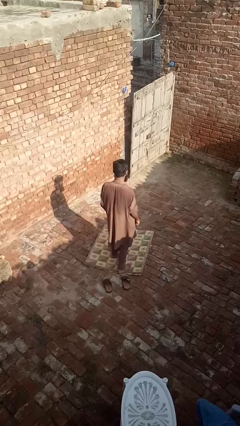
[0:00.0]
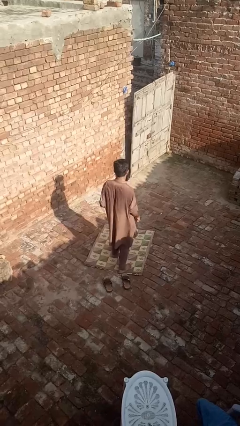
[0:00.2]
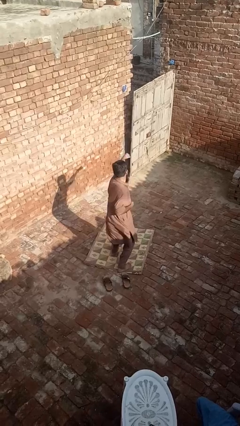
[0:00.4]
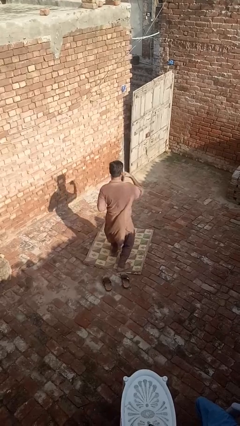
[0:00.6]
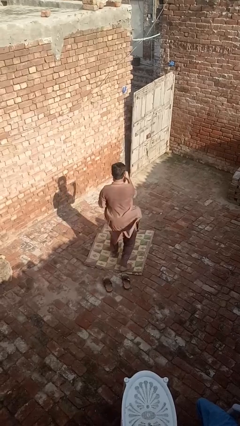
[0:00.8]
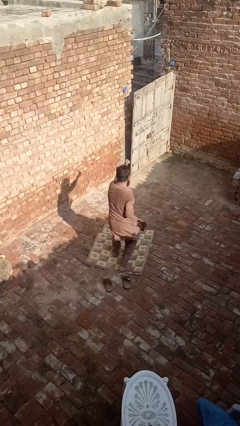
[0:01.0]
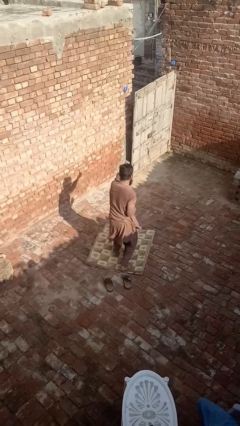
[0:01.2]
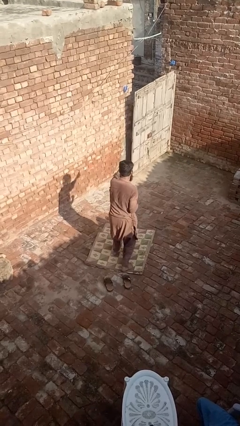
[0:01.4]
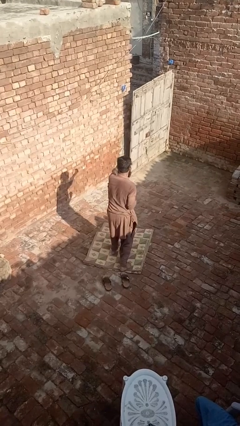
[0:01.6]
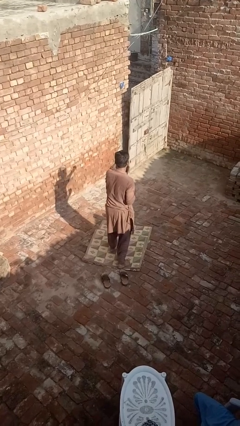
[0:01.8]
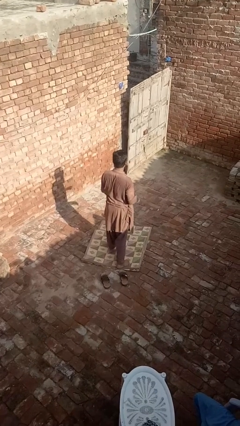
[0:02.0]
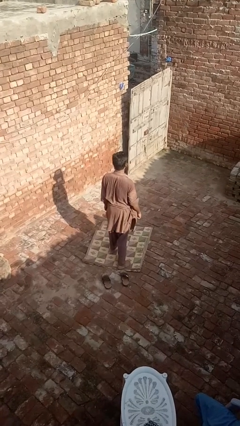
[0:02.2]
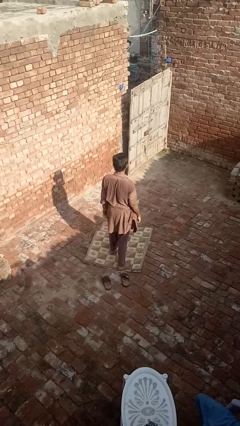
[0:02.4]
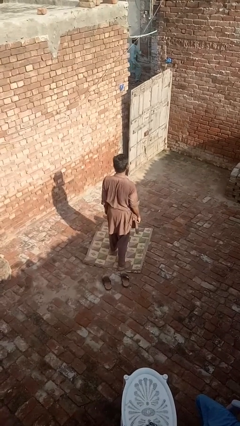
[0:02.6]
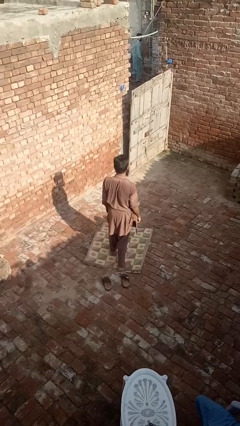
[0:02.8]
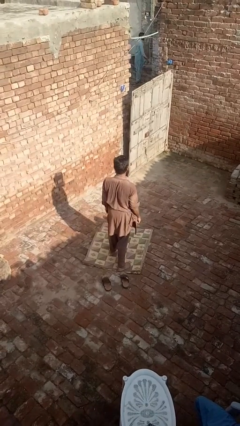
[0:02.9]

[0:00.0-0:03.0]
person punches

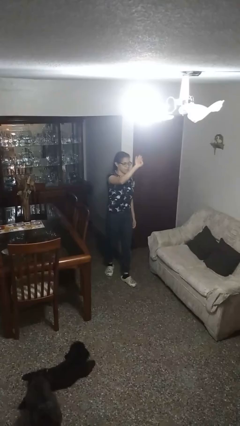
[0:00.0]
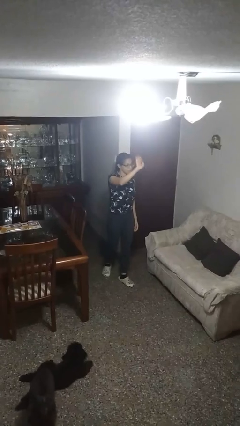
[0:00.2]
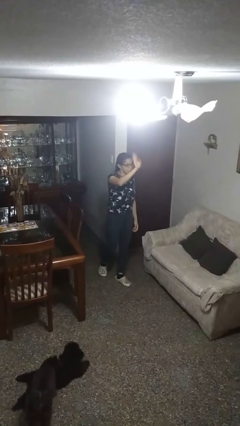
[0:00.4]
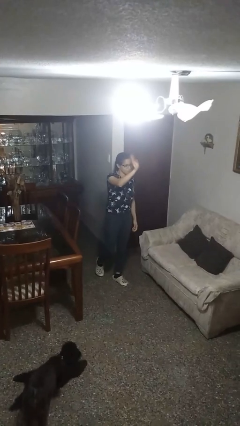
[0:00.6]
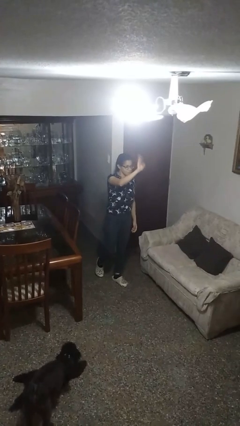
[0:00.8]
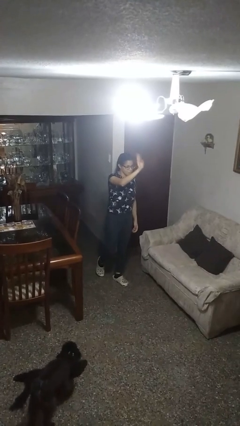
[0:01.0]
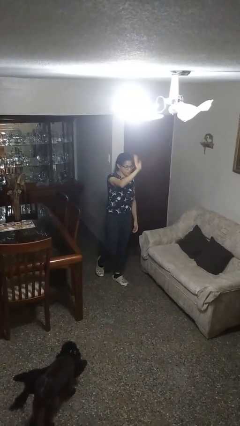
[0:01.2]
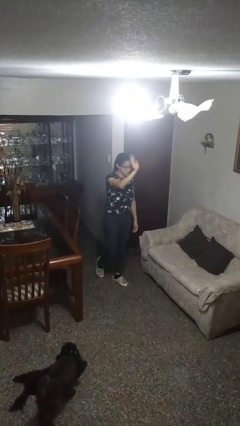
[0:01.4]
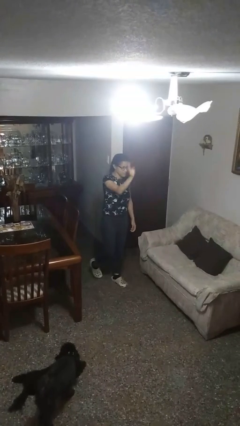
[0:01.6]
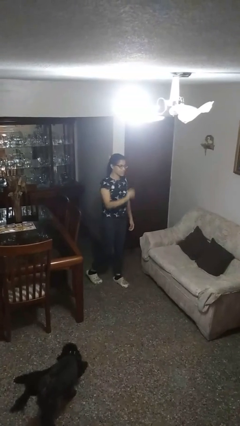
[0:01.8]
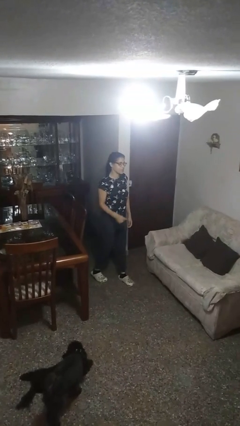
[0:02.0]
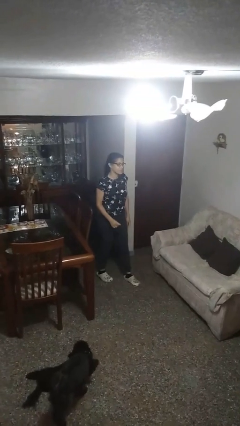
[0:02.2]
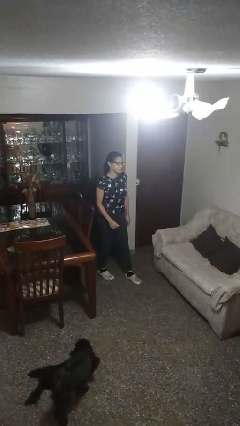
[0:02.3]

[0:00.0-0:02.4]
person waves at person

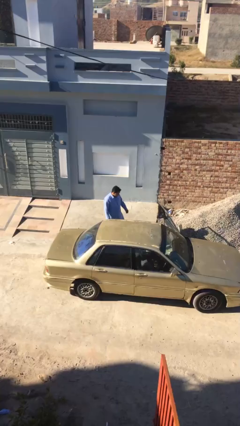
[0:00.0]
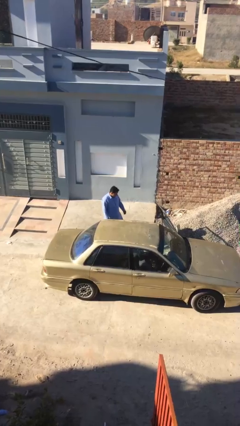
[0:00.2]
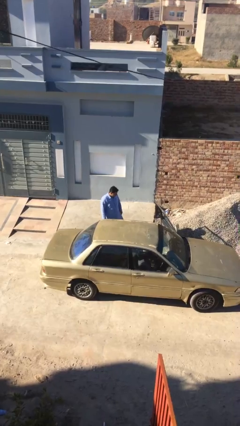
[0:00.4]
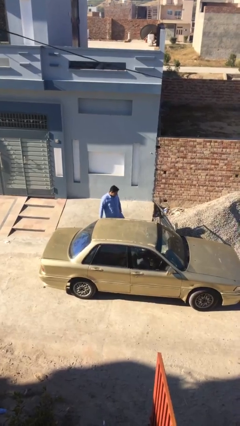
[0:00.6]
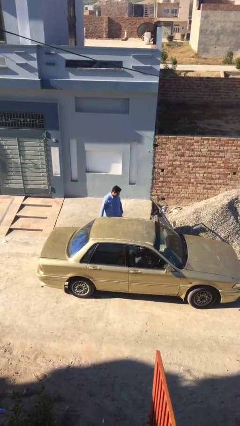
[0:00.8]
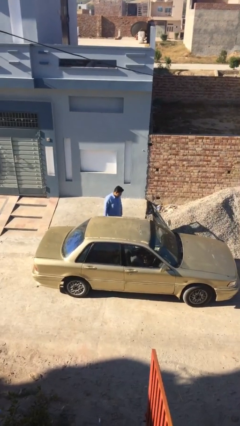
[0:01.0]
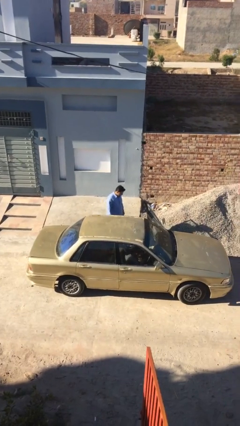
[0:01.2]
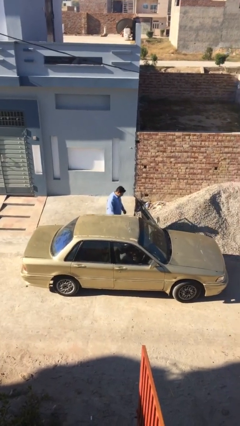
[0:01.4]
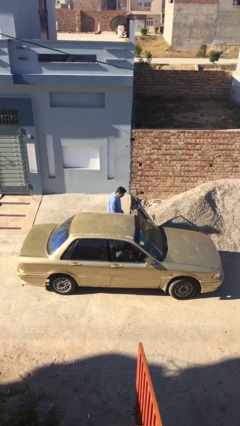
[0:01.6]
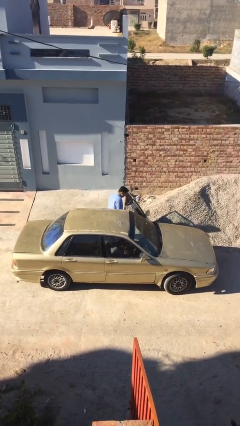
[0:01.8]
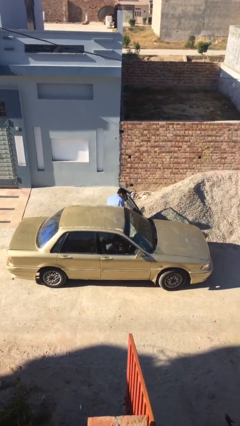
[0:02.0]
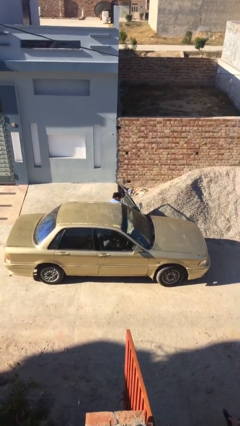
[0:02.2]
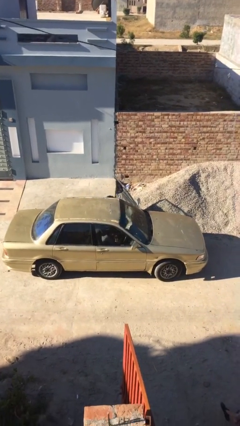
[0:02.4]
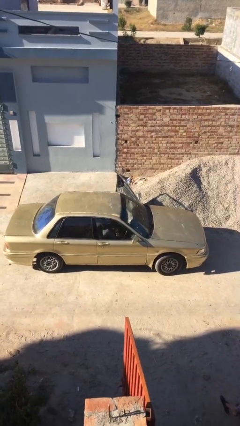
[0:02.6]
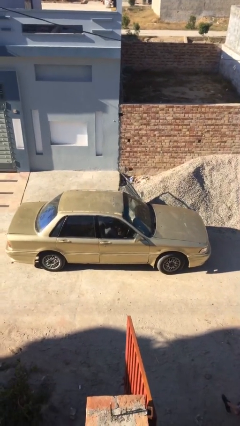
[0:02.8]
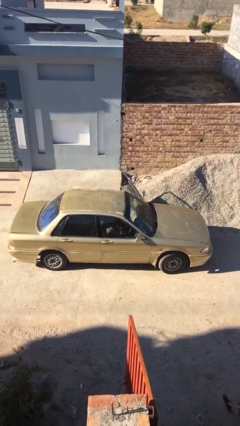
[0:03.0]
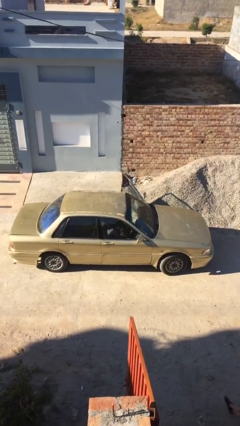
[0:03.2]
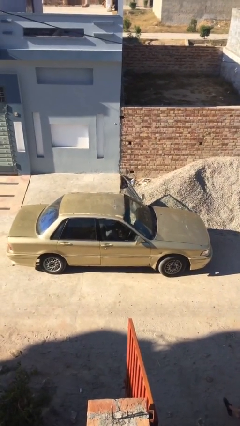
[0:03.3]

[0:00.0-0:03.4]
person enters car

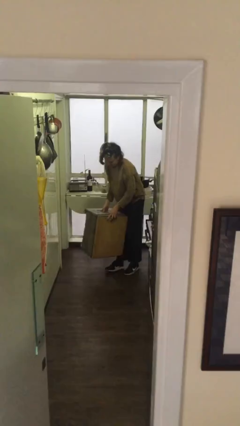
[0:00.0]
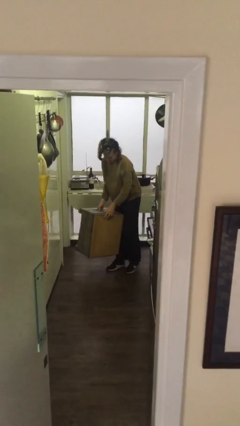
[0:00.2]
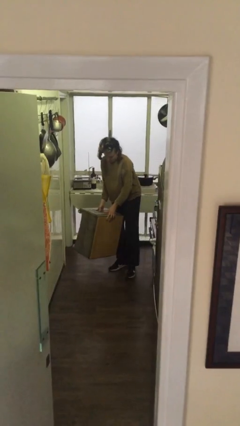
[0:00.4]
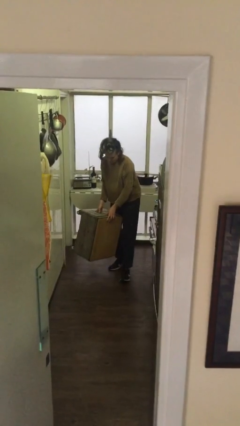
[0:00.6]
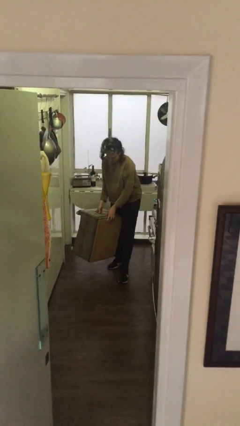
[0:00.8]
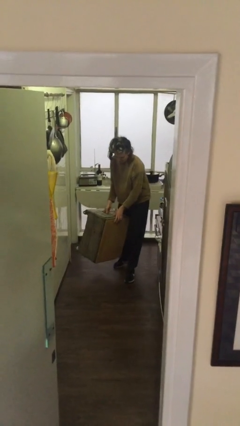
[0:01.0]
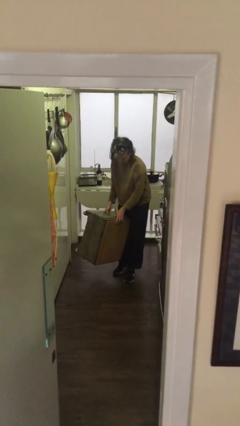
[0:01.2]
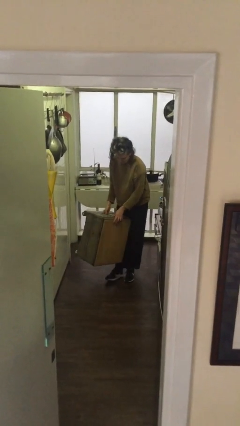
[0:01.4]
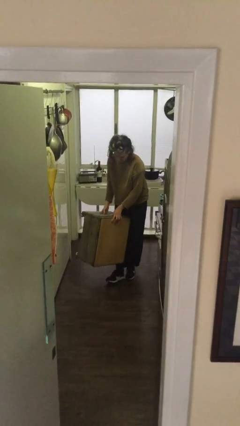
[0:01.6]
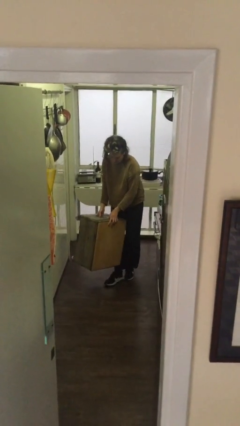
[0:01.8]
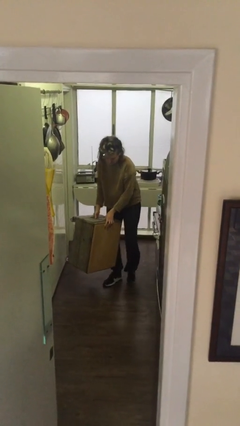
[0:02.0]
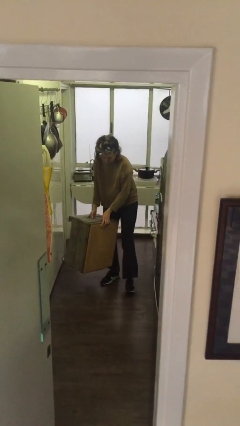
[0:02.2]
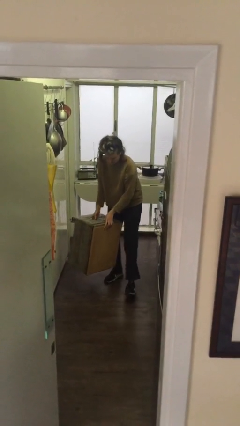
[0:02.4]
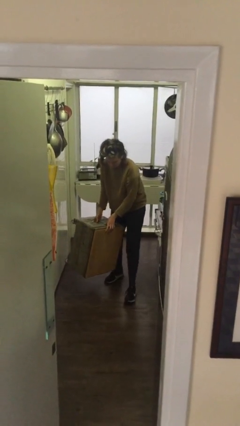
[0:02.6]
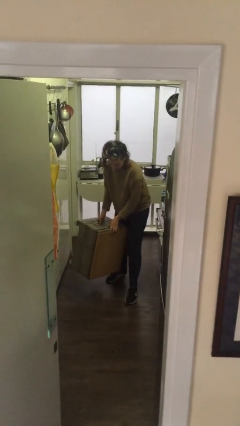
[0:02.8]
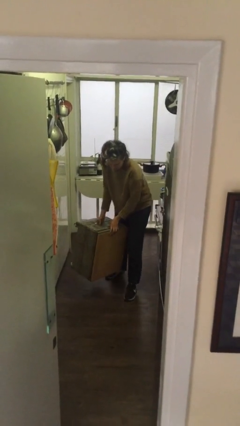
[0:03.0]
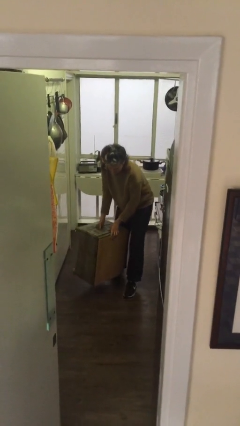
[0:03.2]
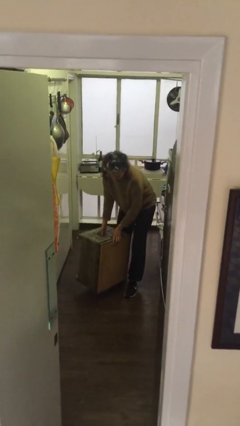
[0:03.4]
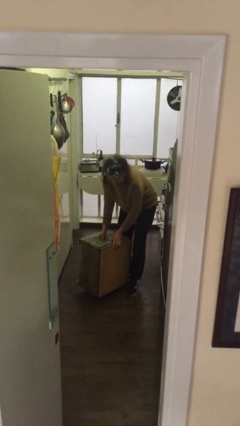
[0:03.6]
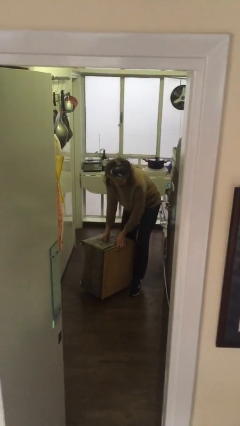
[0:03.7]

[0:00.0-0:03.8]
person carries heavy object

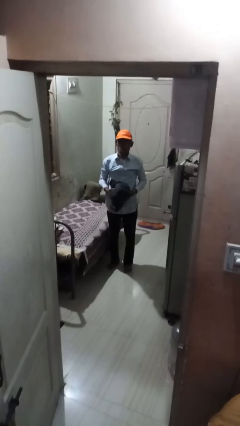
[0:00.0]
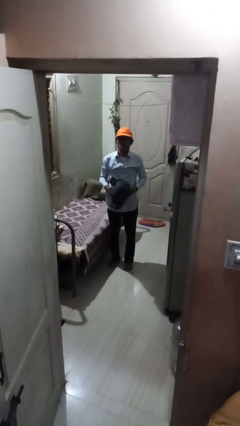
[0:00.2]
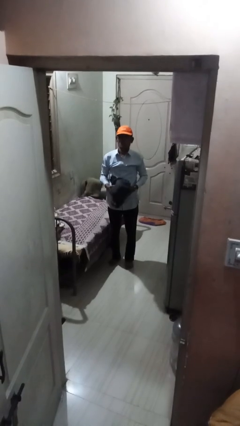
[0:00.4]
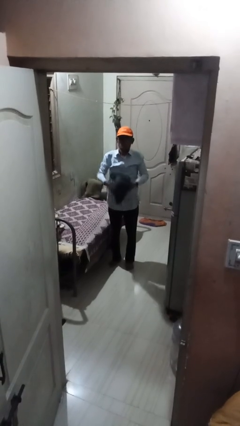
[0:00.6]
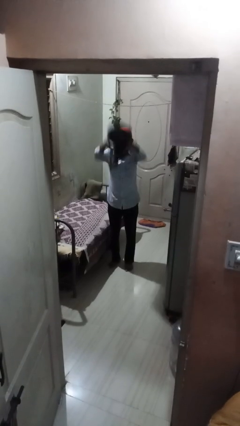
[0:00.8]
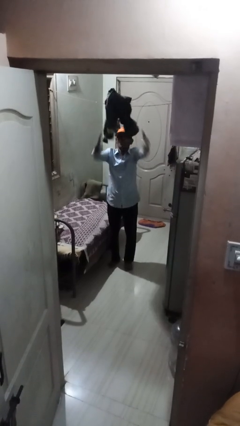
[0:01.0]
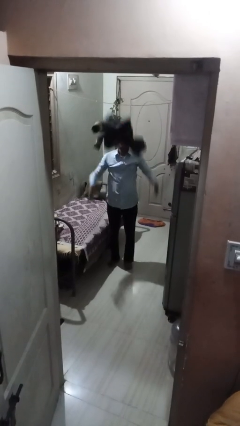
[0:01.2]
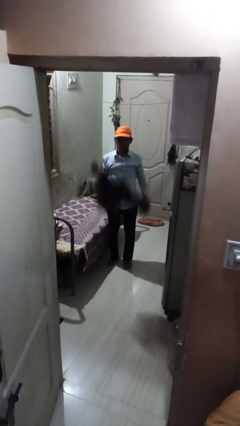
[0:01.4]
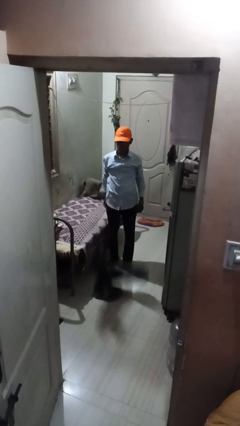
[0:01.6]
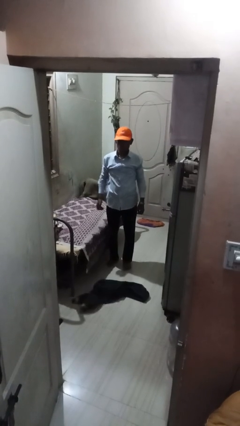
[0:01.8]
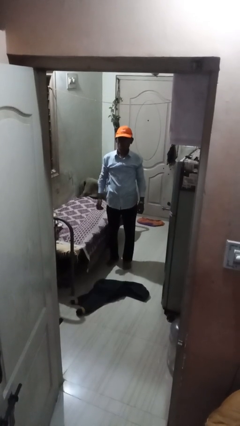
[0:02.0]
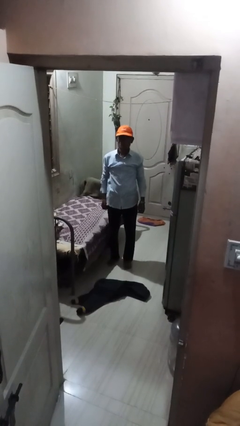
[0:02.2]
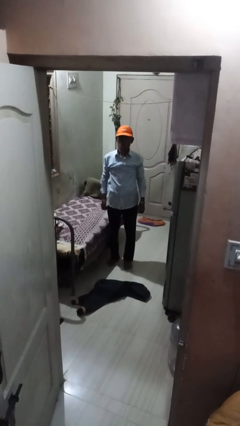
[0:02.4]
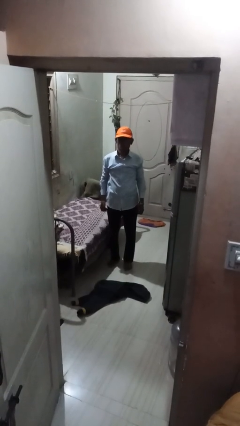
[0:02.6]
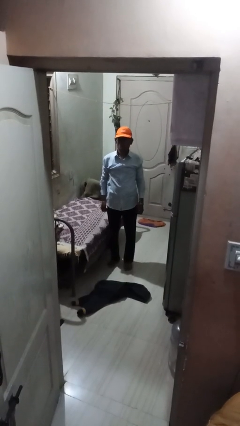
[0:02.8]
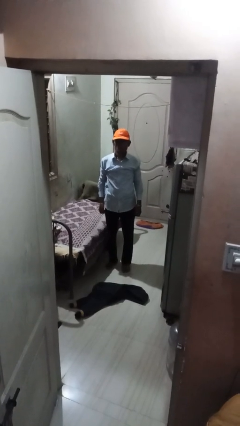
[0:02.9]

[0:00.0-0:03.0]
person throws object into air

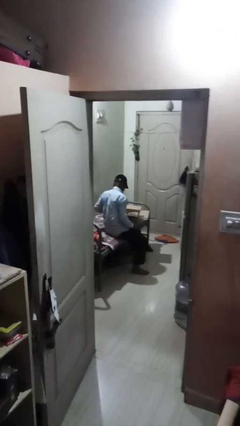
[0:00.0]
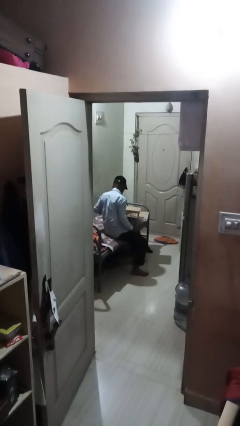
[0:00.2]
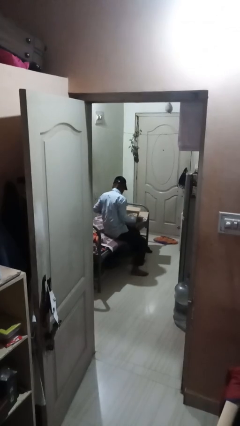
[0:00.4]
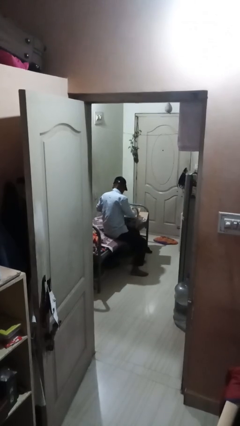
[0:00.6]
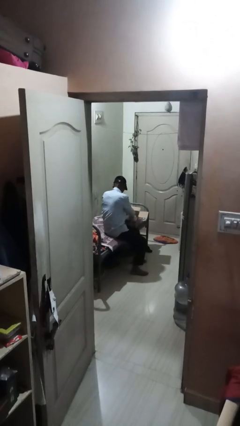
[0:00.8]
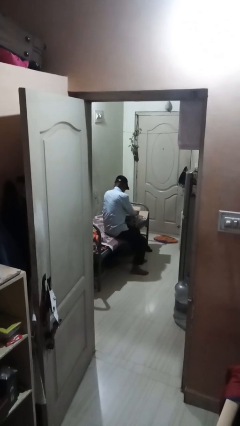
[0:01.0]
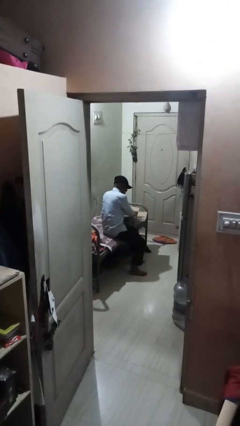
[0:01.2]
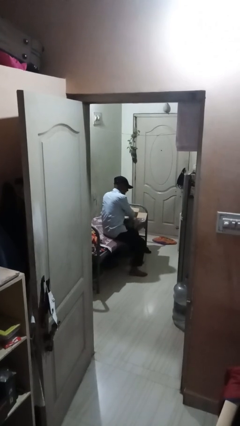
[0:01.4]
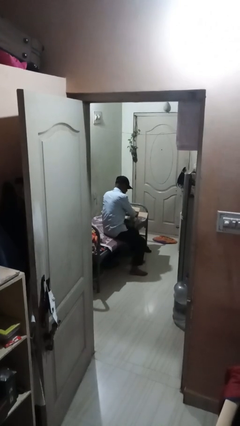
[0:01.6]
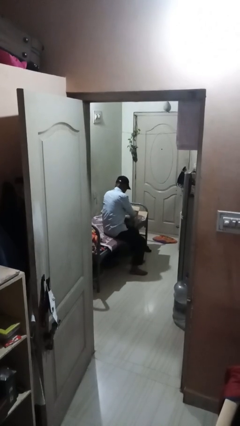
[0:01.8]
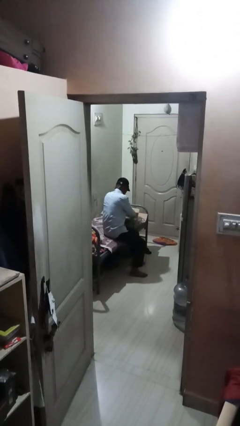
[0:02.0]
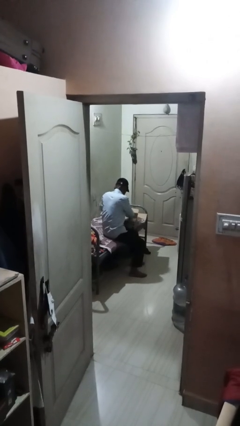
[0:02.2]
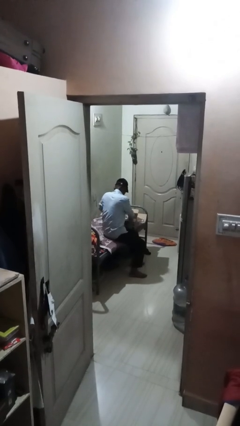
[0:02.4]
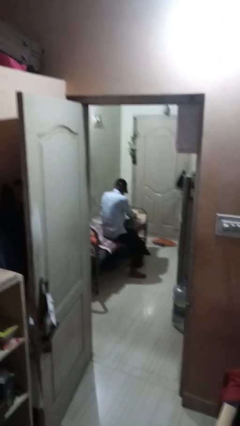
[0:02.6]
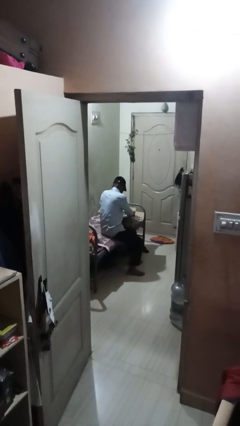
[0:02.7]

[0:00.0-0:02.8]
person searches in box
